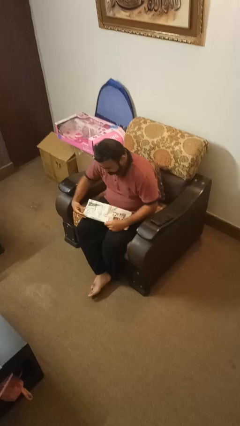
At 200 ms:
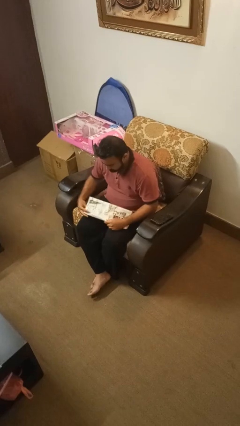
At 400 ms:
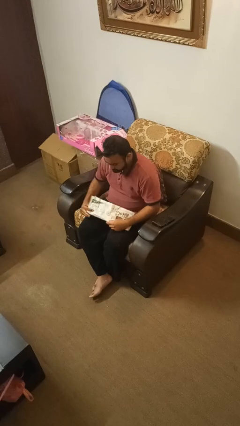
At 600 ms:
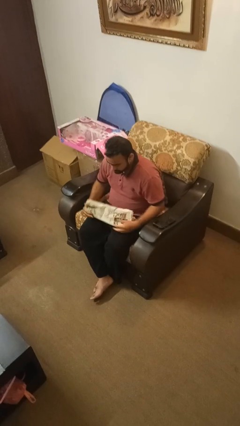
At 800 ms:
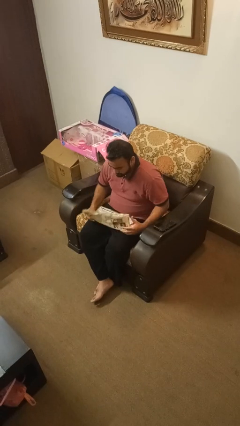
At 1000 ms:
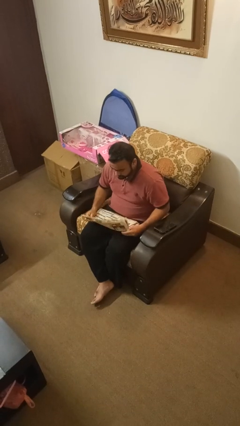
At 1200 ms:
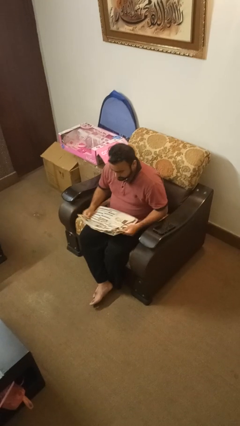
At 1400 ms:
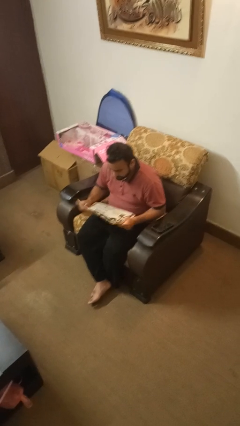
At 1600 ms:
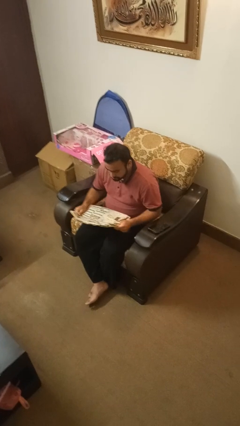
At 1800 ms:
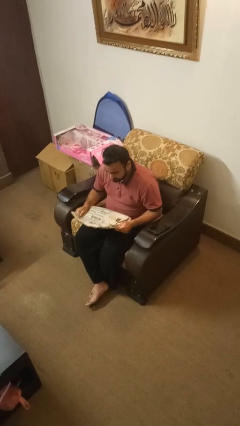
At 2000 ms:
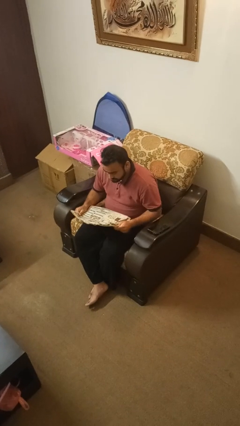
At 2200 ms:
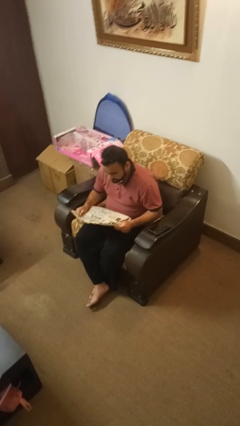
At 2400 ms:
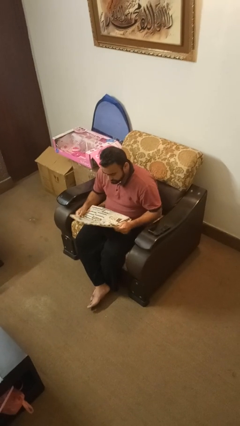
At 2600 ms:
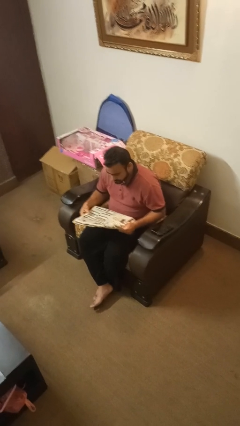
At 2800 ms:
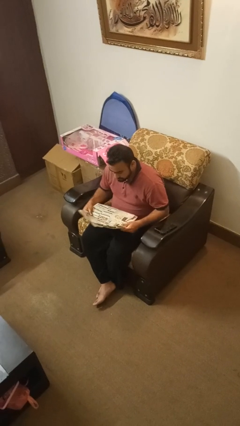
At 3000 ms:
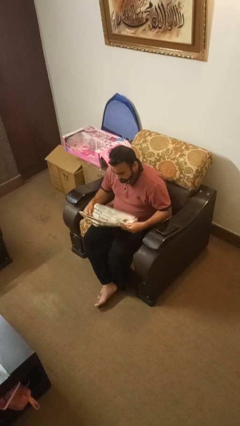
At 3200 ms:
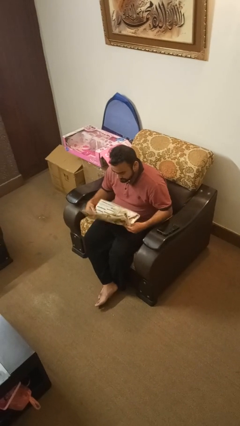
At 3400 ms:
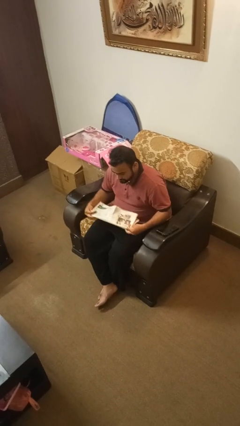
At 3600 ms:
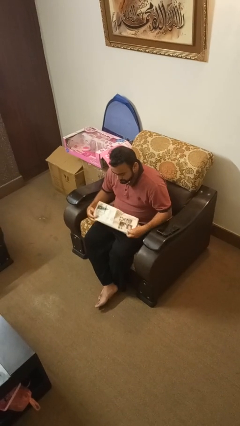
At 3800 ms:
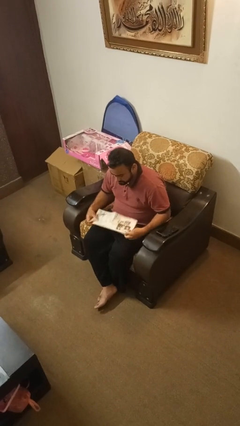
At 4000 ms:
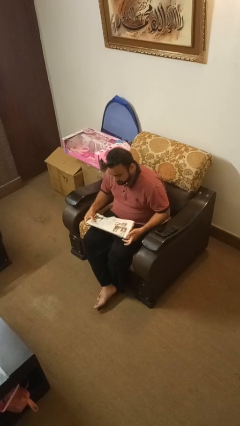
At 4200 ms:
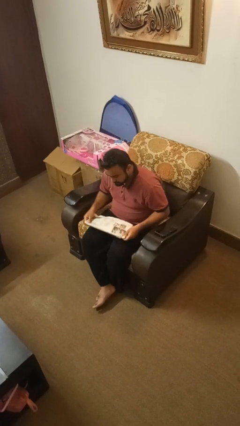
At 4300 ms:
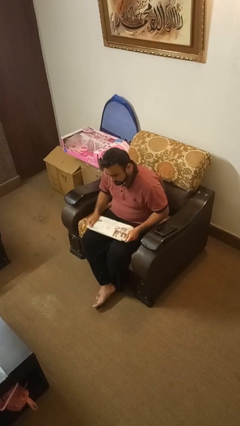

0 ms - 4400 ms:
person reads newspaper

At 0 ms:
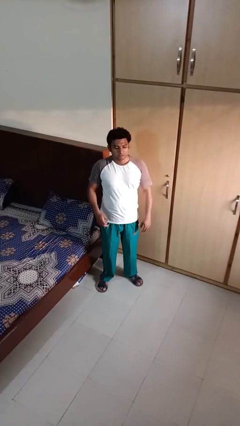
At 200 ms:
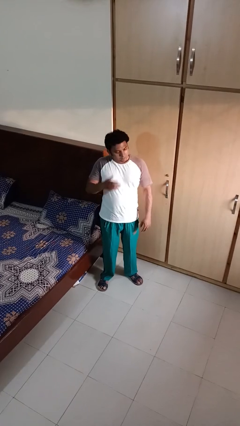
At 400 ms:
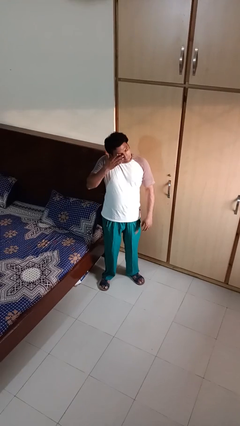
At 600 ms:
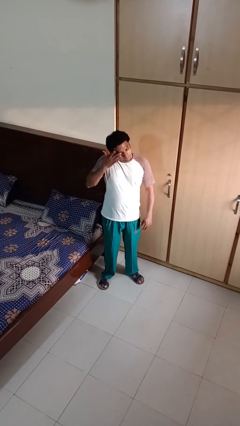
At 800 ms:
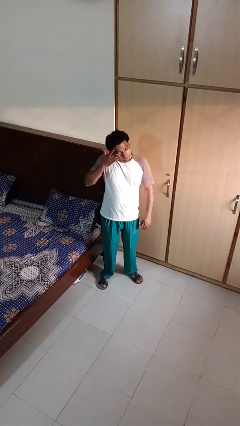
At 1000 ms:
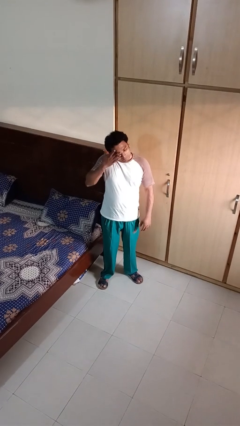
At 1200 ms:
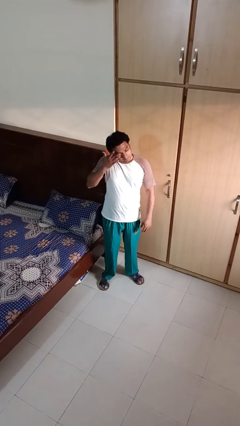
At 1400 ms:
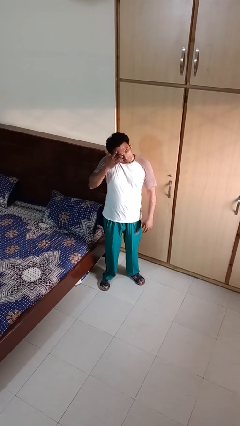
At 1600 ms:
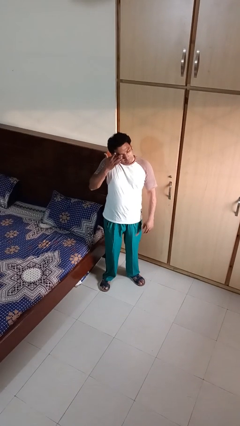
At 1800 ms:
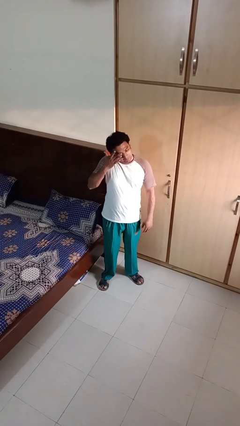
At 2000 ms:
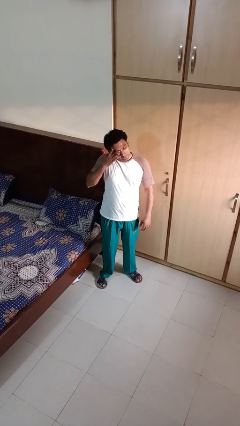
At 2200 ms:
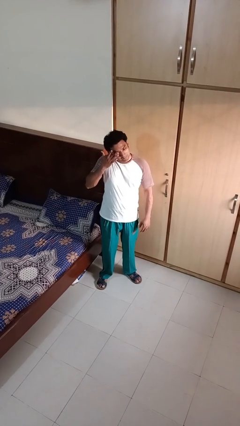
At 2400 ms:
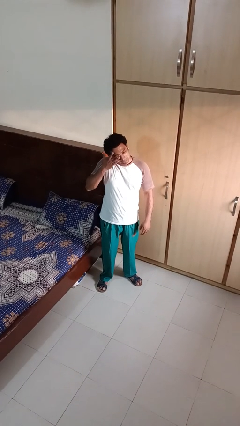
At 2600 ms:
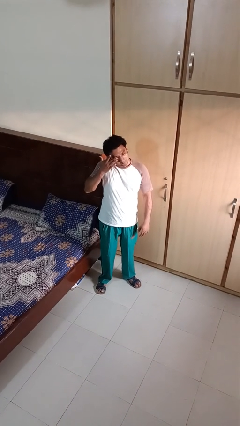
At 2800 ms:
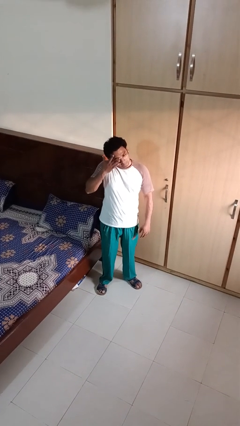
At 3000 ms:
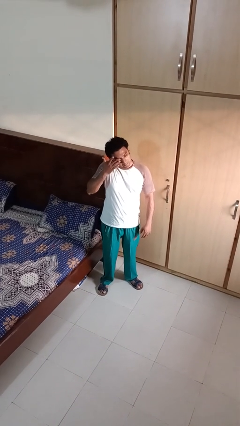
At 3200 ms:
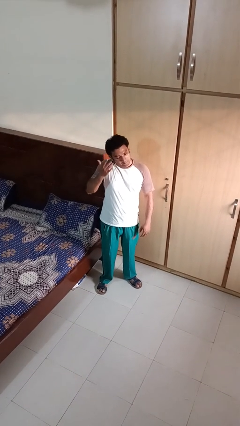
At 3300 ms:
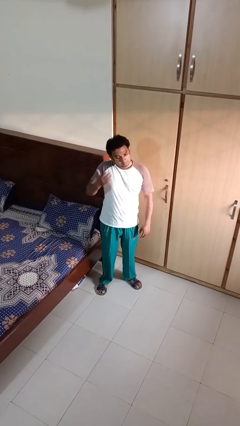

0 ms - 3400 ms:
person rubs eyes

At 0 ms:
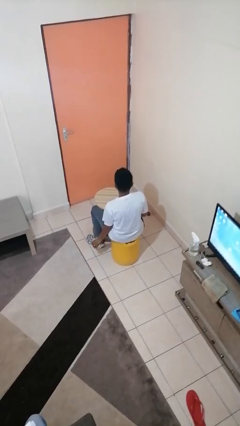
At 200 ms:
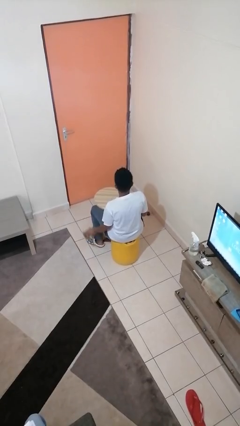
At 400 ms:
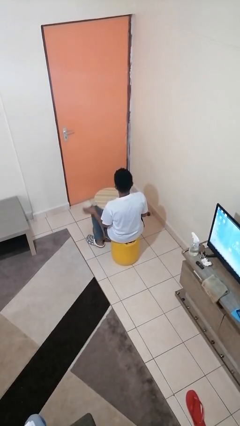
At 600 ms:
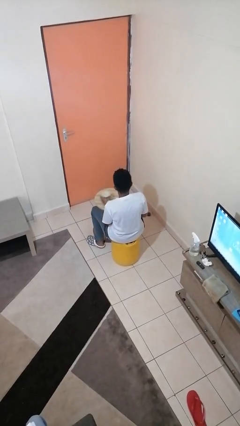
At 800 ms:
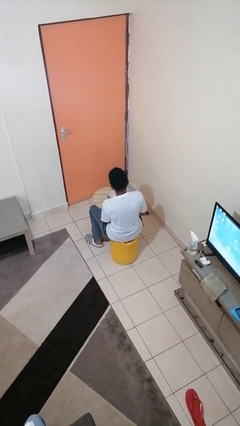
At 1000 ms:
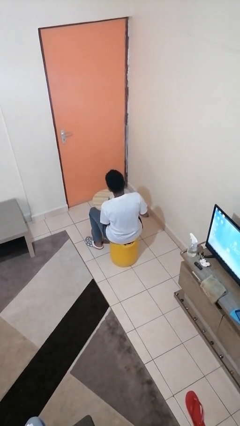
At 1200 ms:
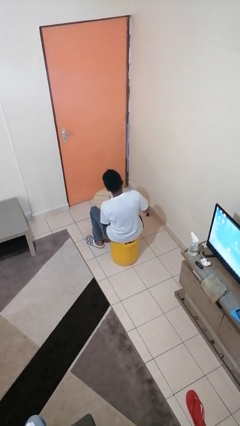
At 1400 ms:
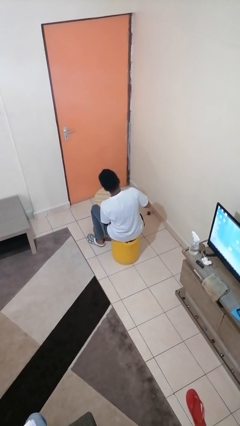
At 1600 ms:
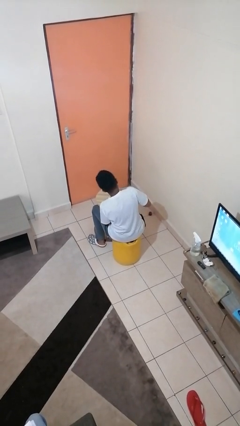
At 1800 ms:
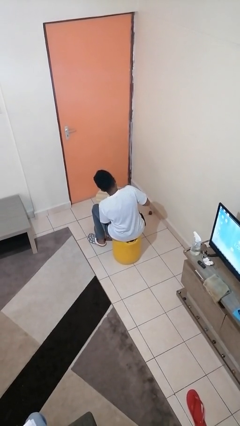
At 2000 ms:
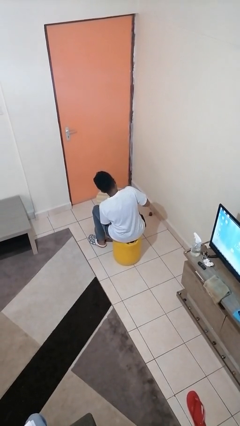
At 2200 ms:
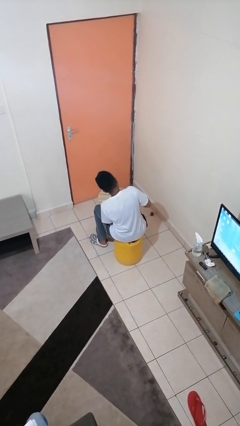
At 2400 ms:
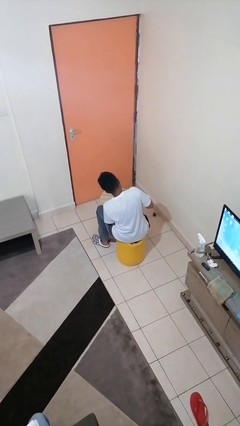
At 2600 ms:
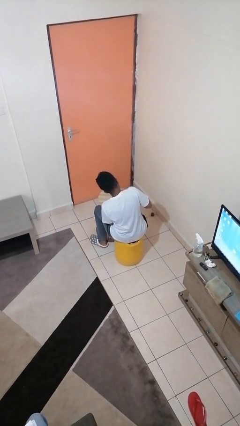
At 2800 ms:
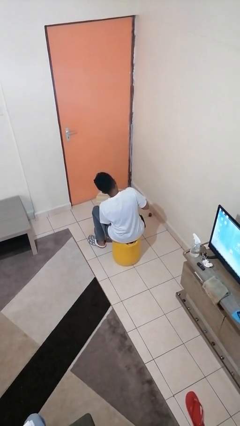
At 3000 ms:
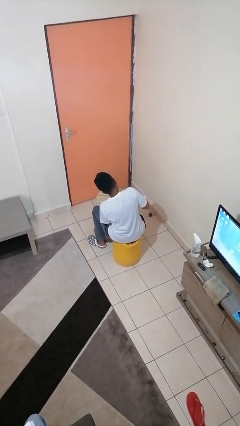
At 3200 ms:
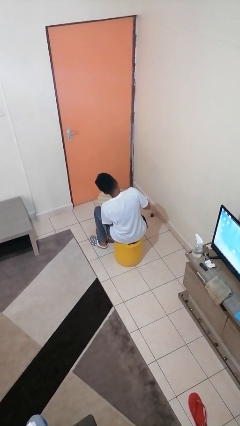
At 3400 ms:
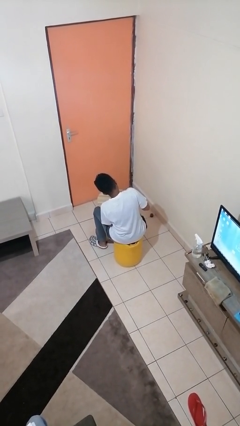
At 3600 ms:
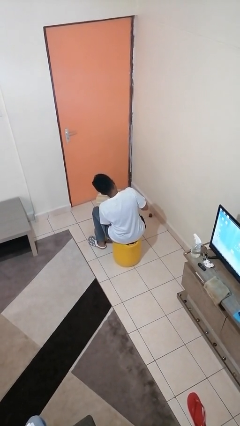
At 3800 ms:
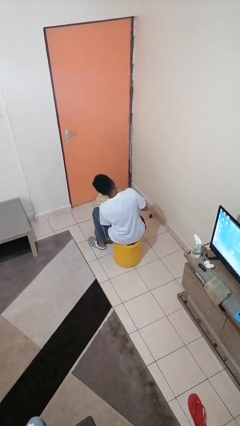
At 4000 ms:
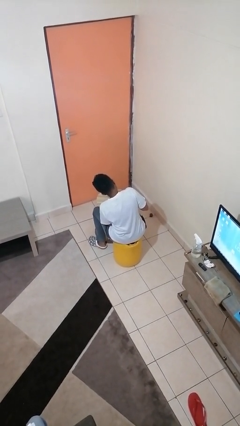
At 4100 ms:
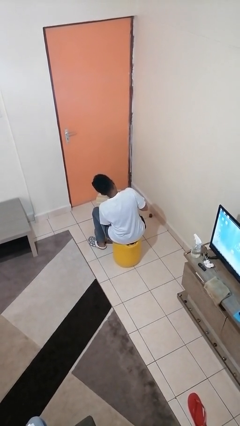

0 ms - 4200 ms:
person opens can with can opener

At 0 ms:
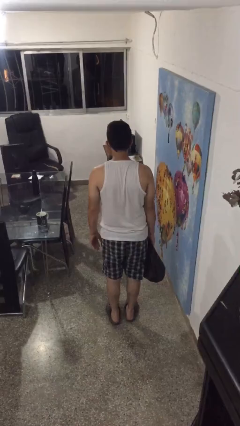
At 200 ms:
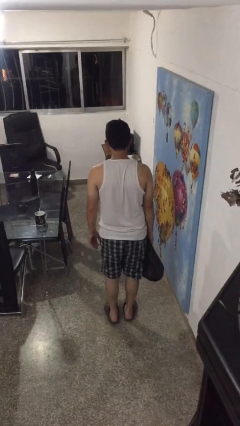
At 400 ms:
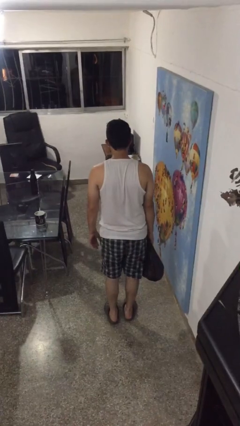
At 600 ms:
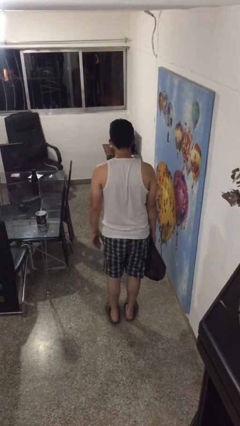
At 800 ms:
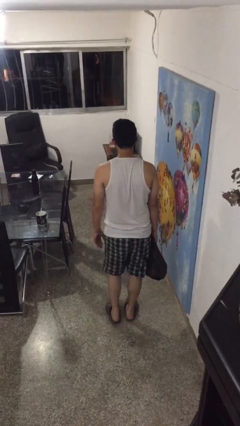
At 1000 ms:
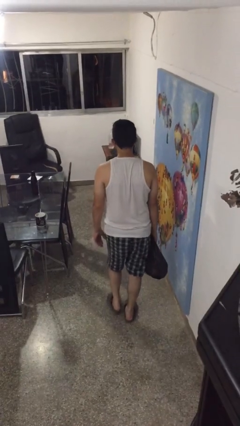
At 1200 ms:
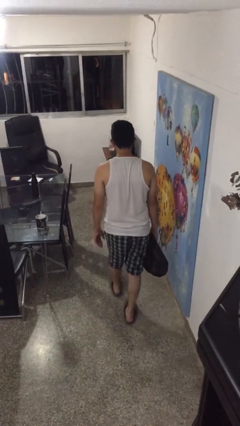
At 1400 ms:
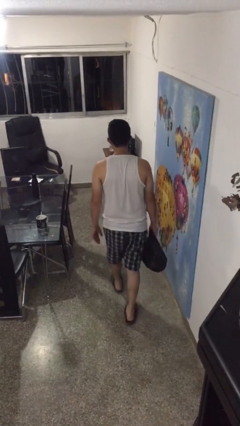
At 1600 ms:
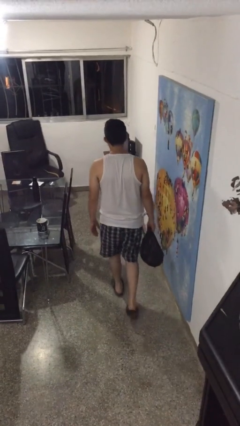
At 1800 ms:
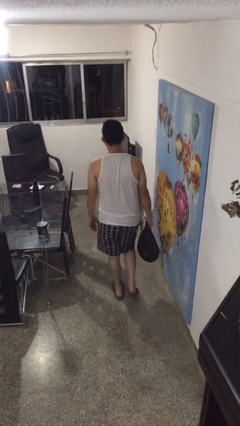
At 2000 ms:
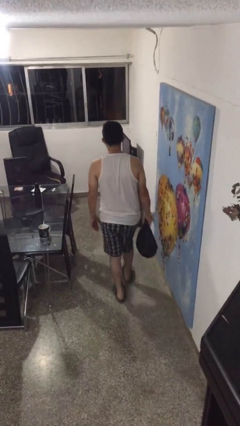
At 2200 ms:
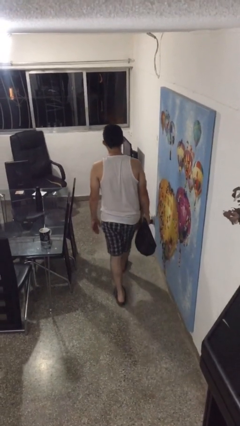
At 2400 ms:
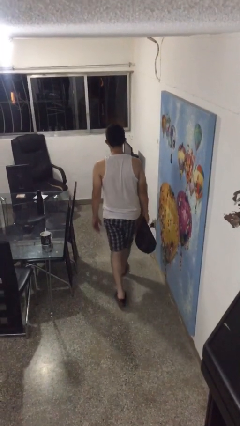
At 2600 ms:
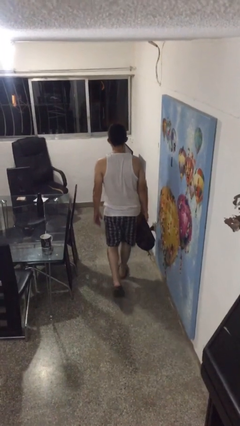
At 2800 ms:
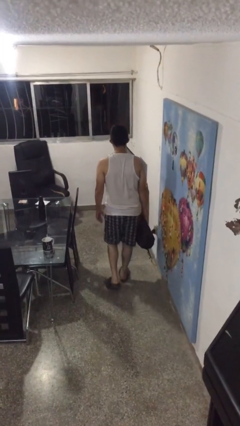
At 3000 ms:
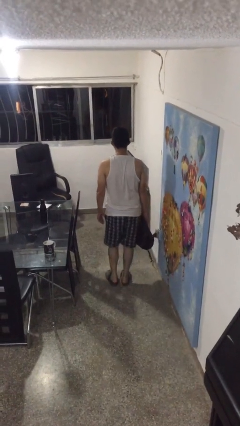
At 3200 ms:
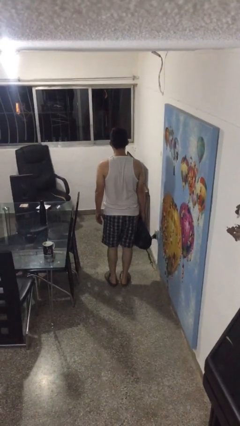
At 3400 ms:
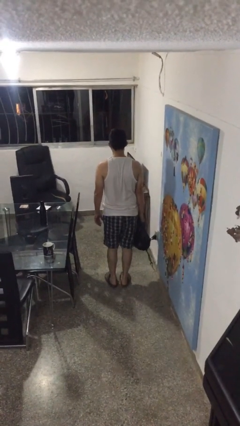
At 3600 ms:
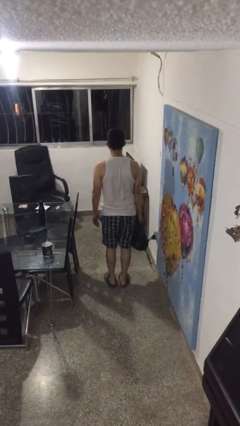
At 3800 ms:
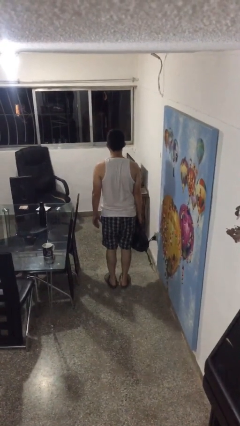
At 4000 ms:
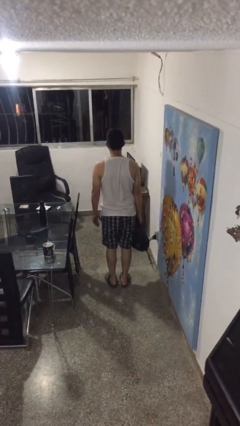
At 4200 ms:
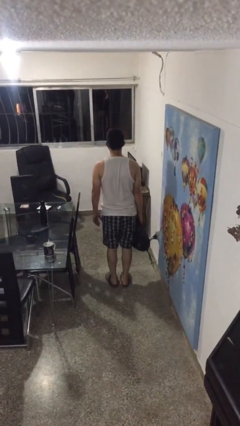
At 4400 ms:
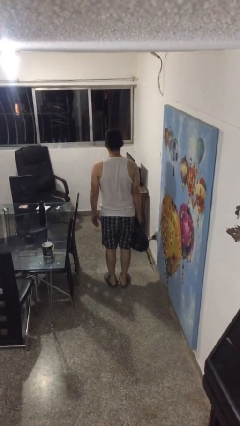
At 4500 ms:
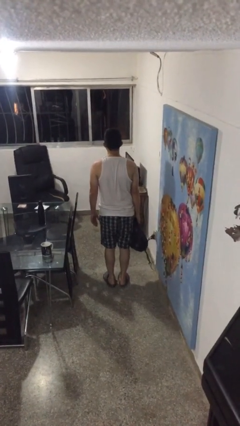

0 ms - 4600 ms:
person carries groceries

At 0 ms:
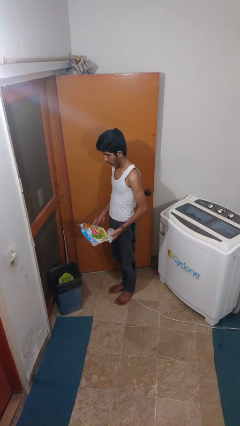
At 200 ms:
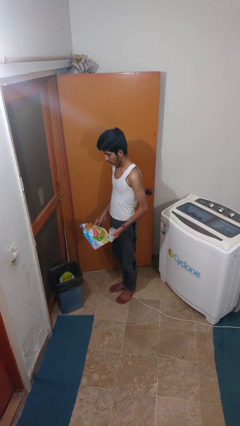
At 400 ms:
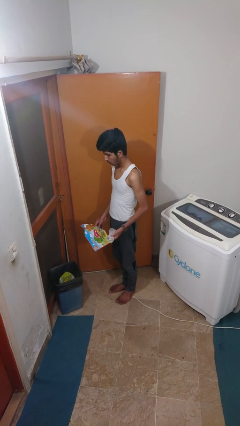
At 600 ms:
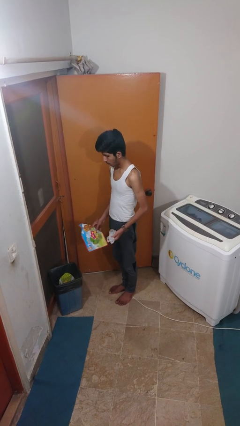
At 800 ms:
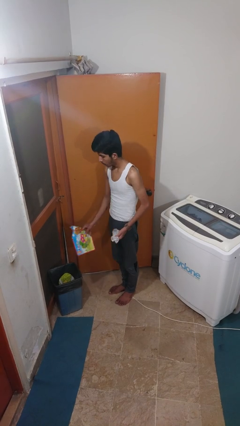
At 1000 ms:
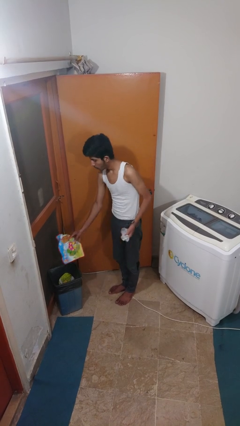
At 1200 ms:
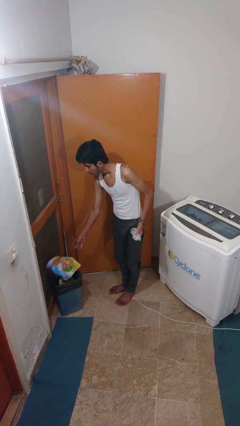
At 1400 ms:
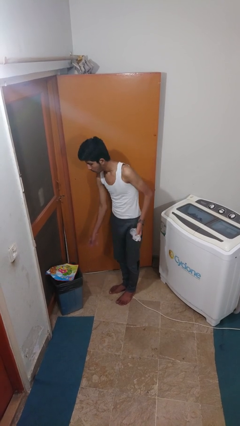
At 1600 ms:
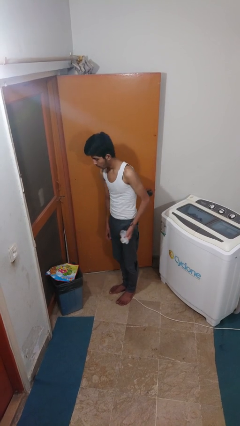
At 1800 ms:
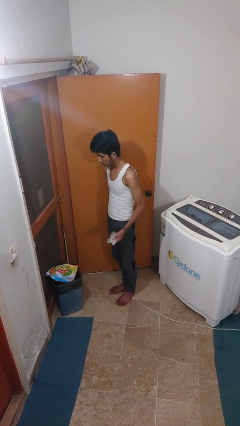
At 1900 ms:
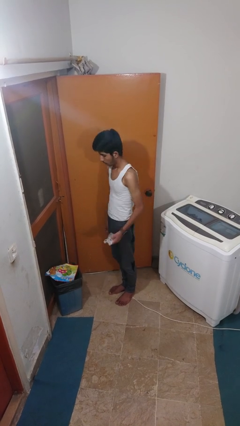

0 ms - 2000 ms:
person discards trash
